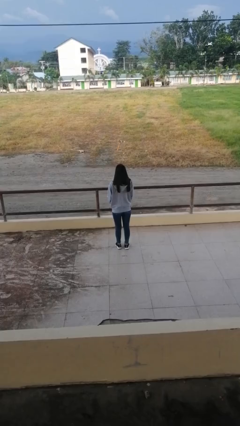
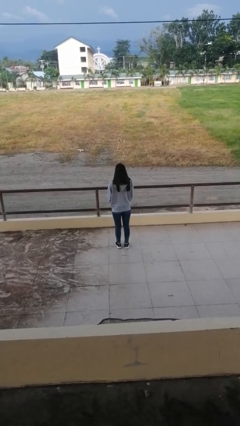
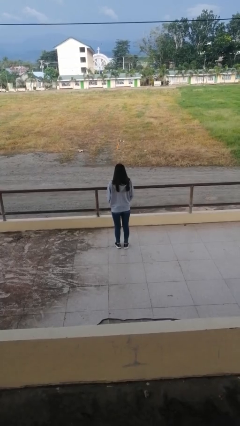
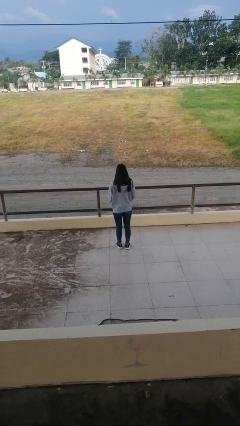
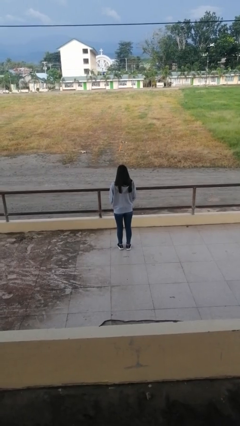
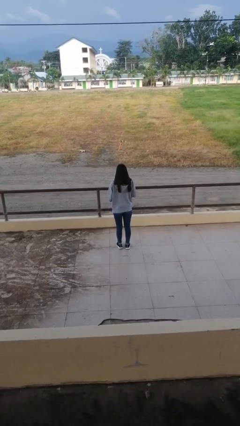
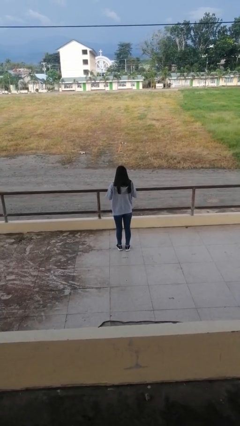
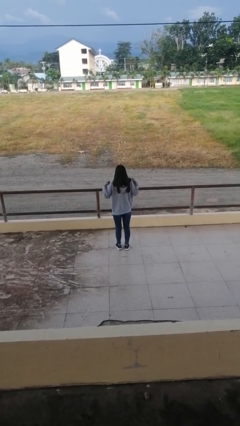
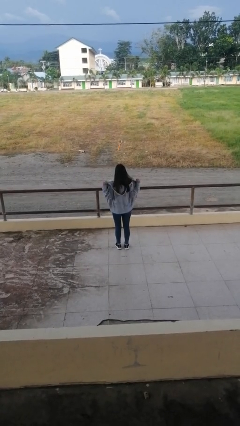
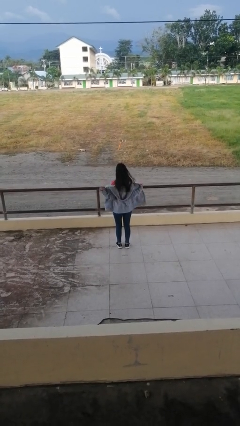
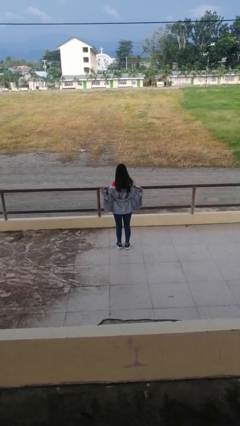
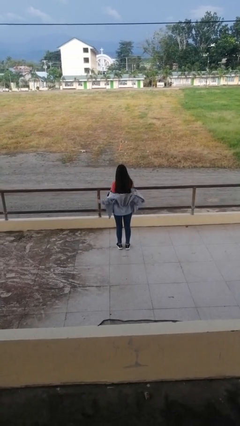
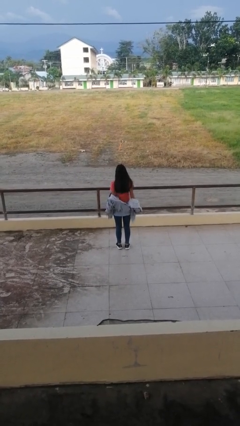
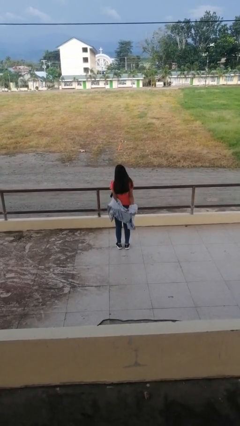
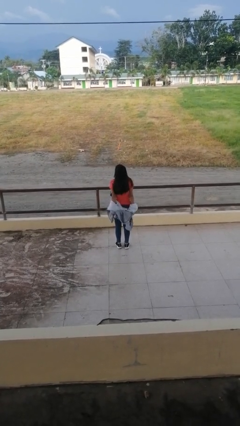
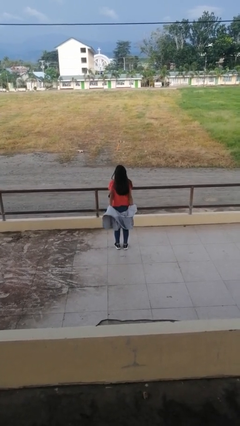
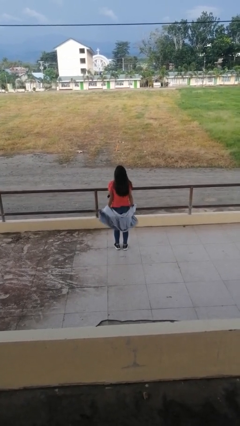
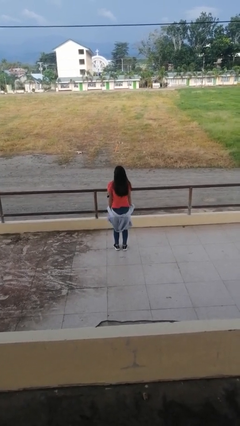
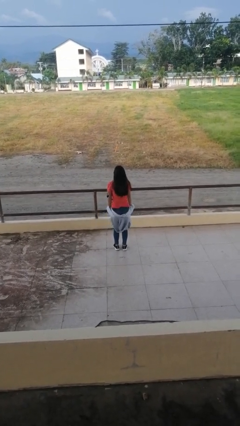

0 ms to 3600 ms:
person takes off jacket

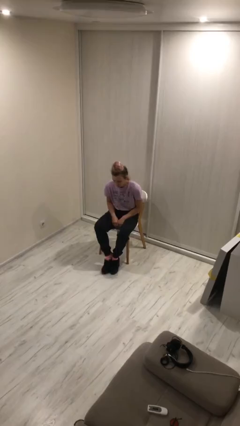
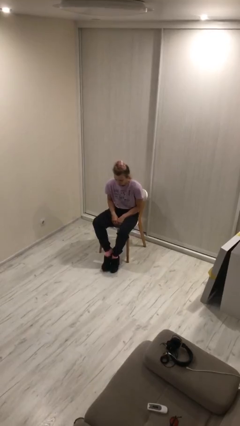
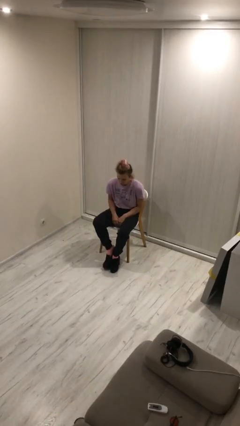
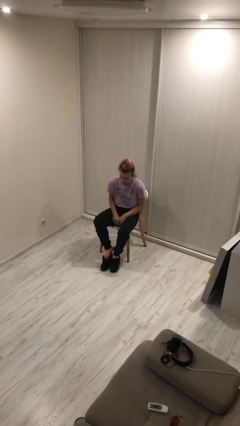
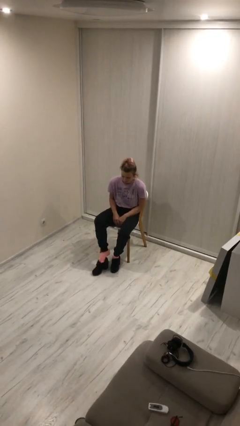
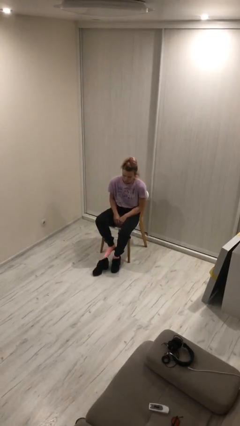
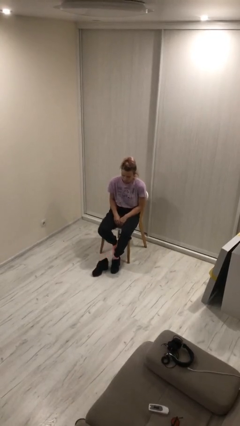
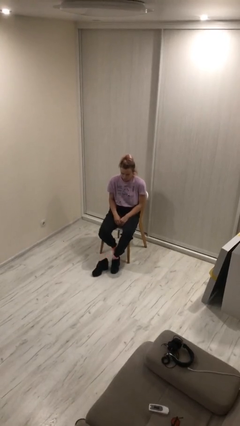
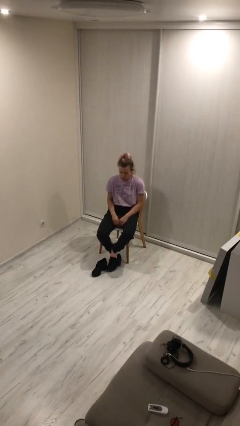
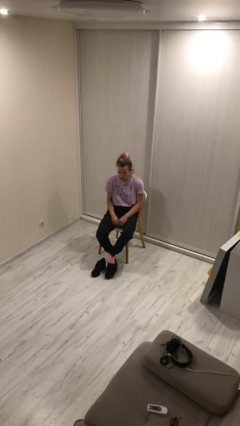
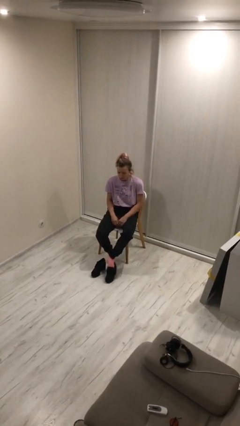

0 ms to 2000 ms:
person takes off shoes

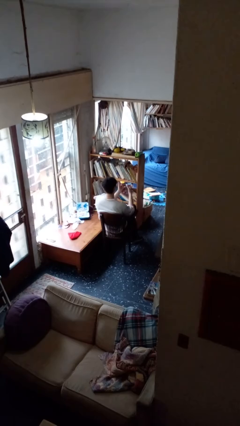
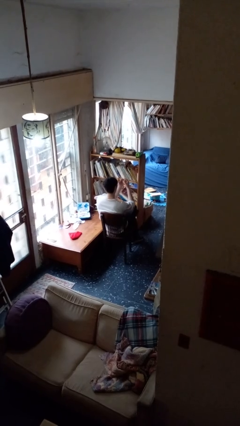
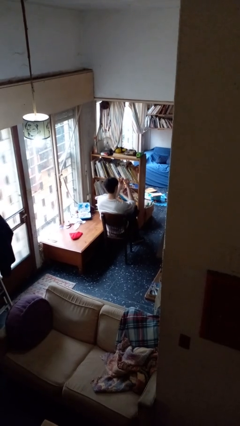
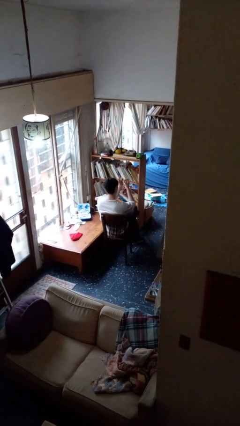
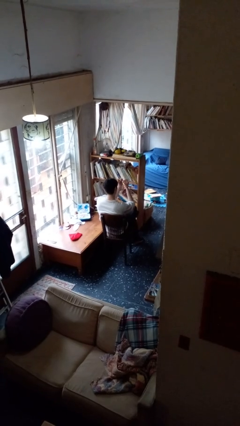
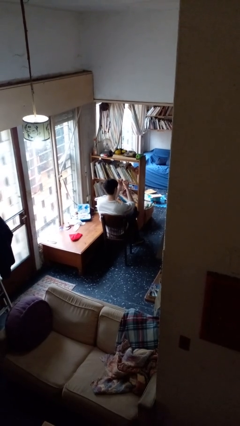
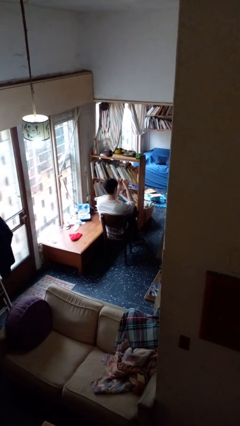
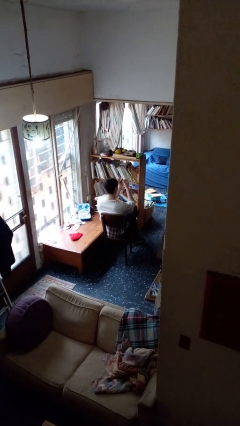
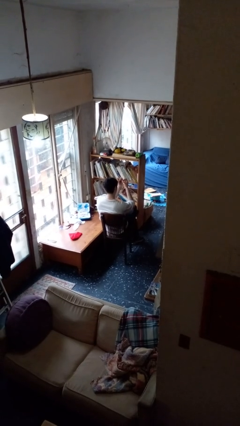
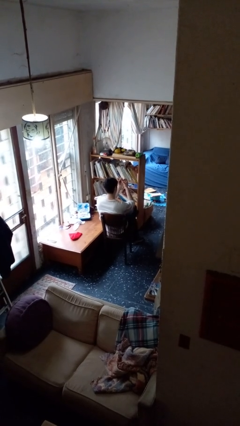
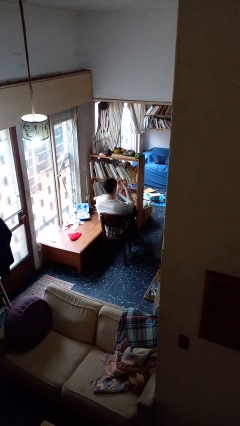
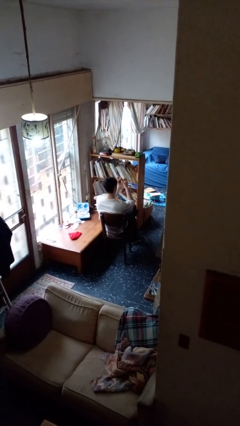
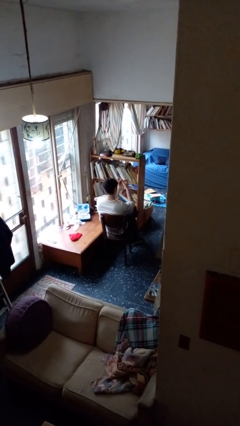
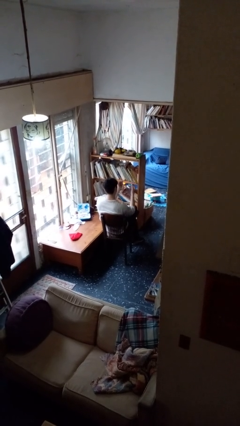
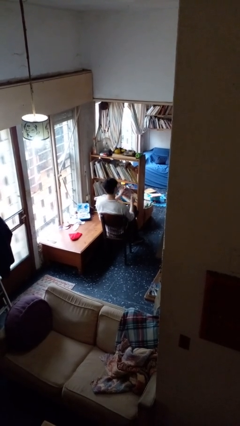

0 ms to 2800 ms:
person files fingernails

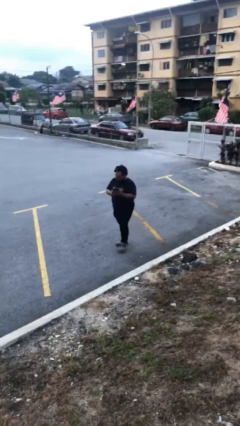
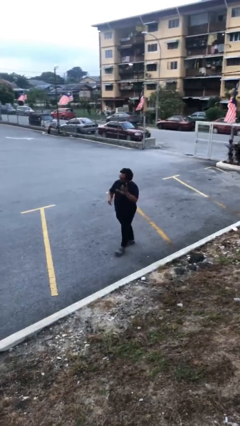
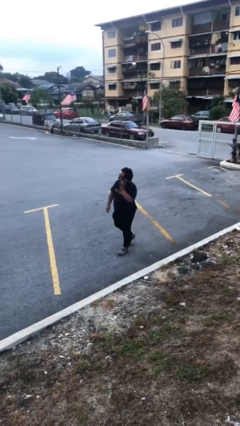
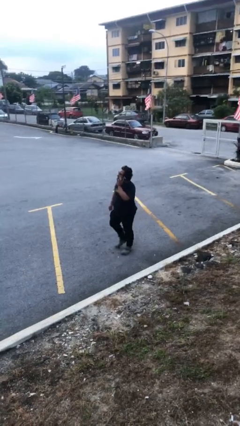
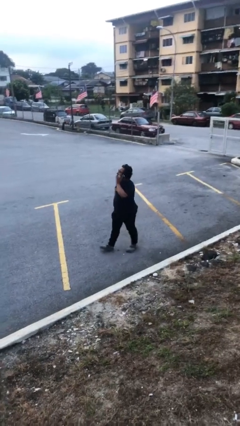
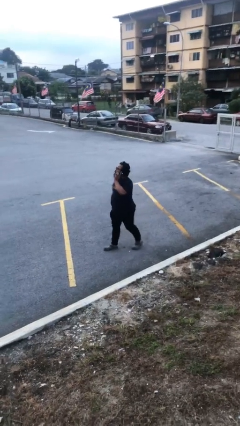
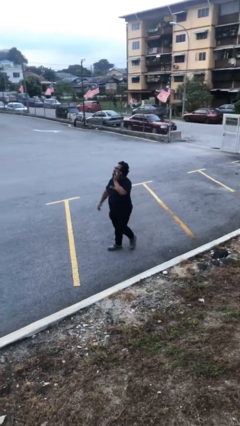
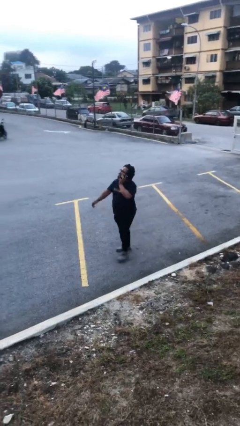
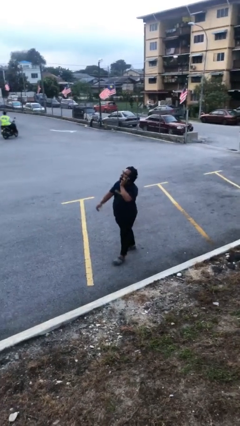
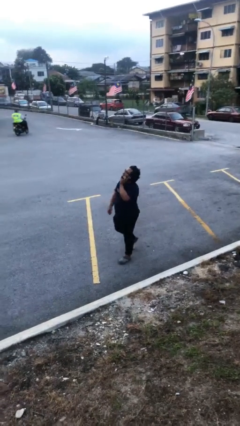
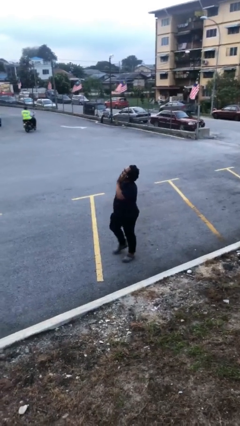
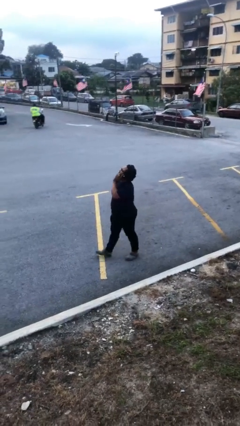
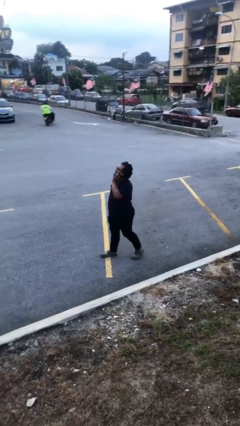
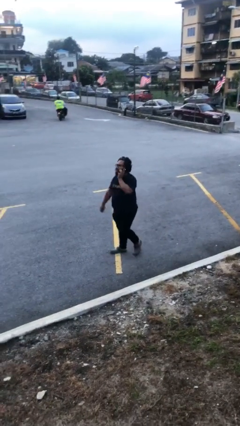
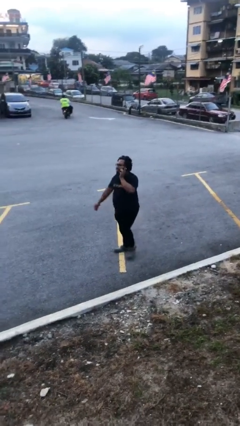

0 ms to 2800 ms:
person talks on phone

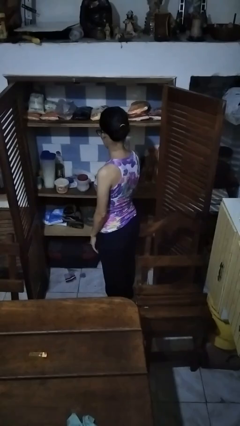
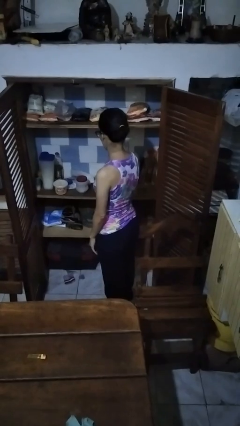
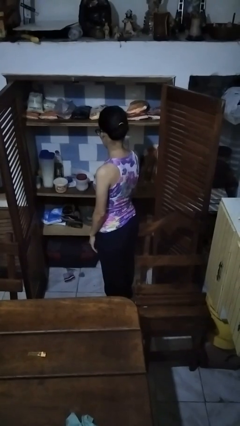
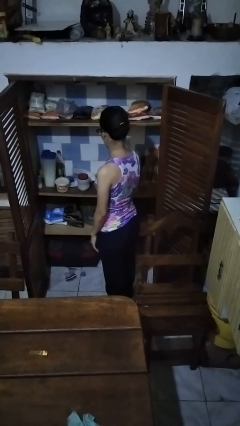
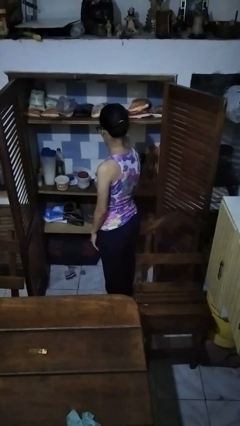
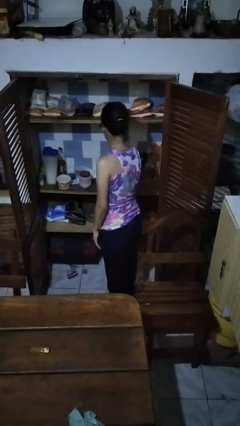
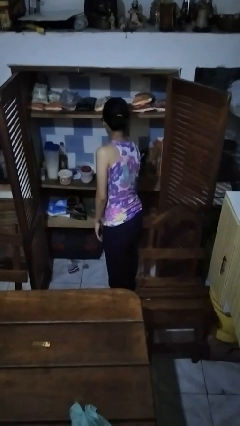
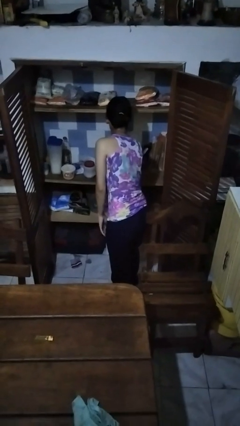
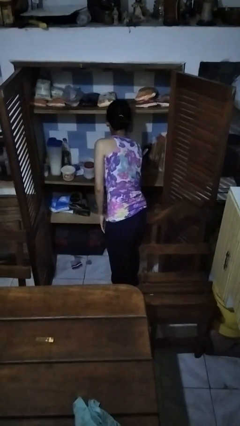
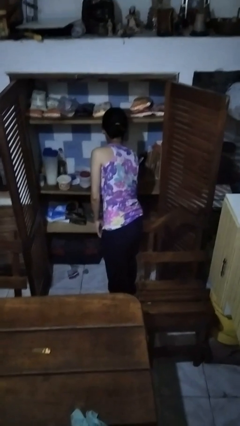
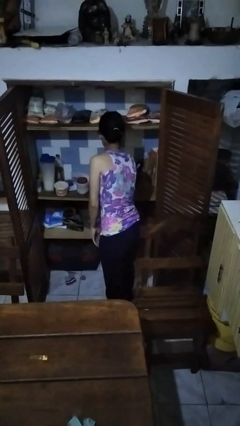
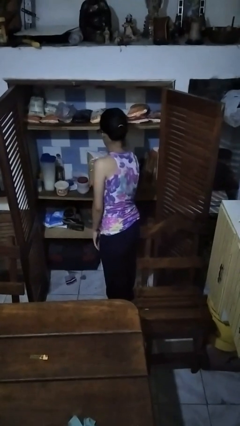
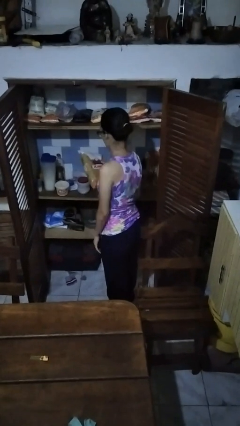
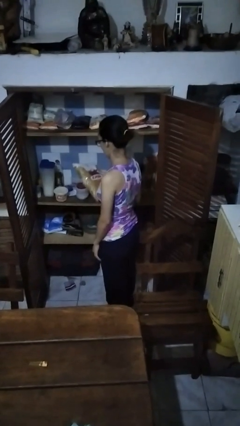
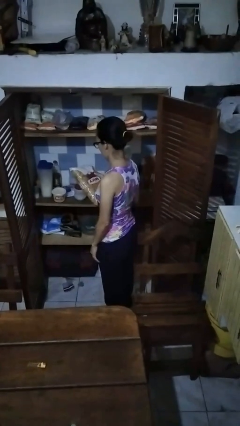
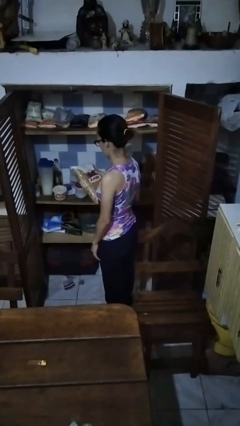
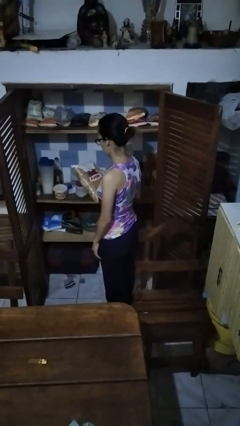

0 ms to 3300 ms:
person takes object from cabinet

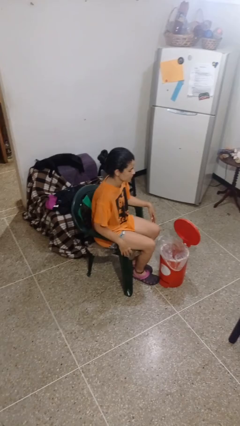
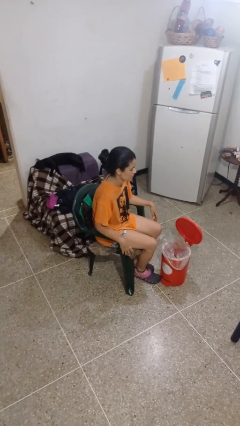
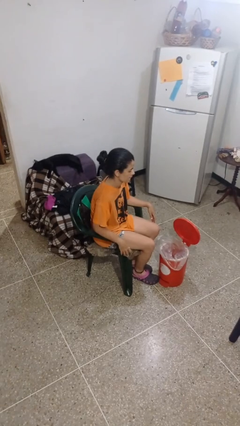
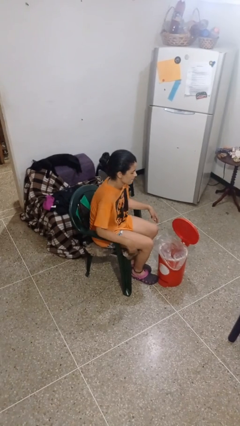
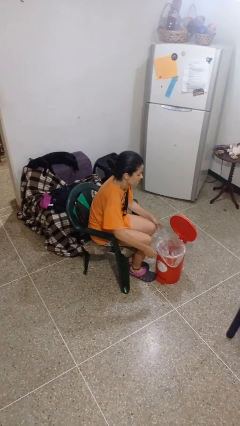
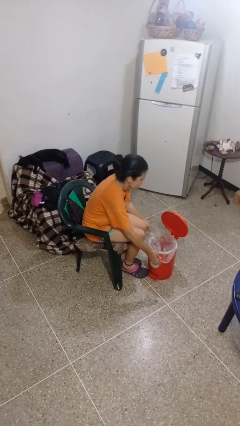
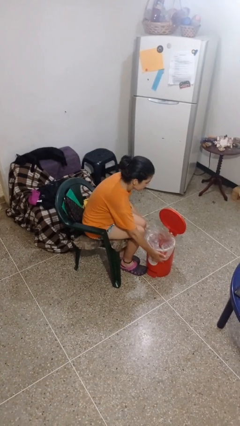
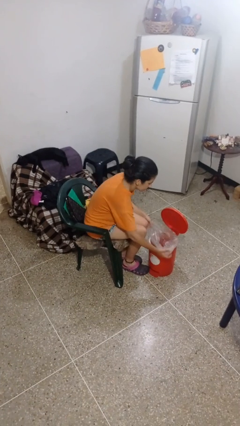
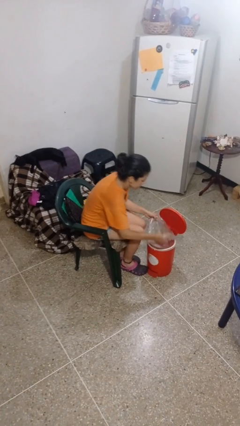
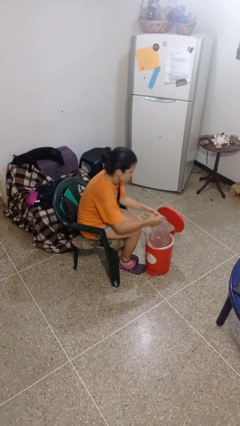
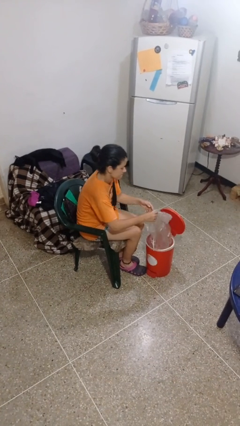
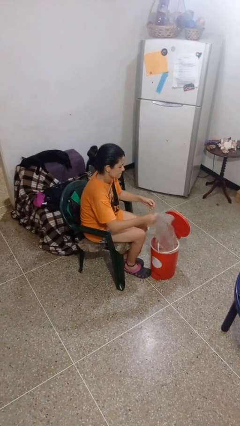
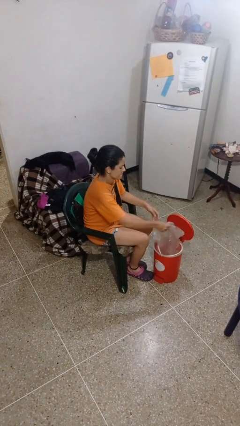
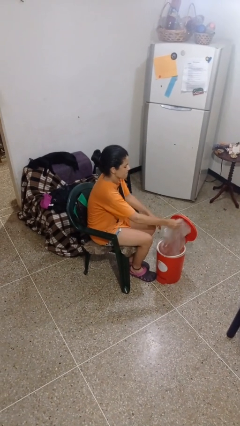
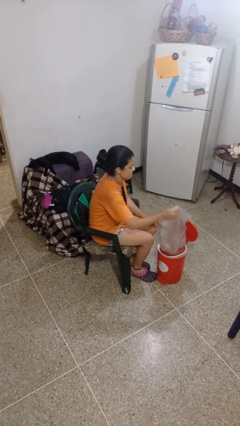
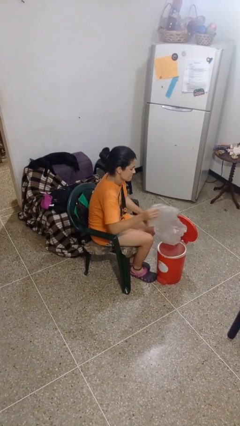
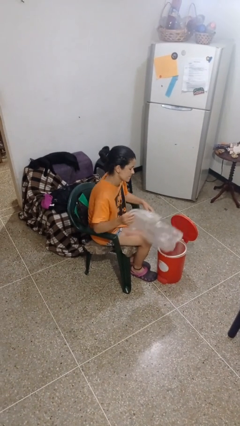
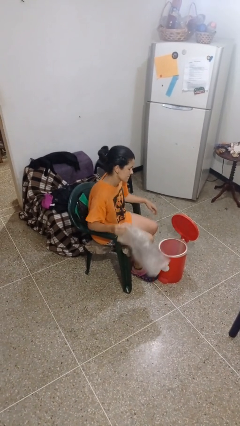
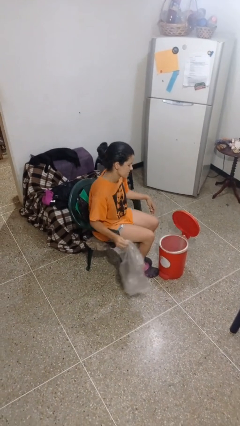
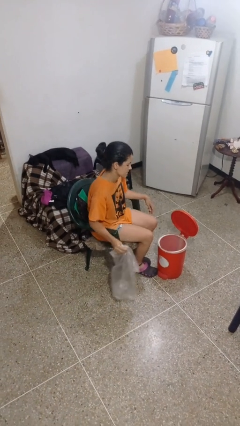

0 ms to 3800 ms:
person removes trashbag from trashcan
